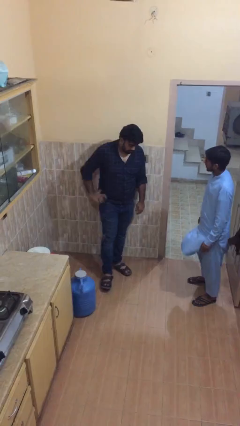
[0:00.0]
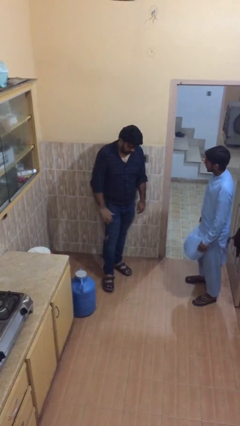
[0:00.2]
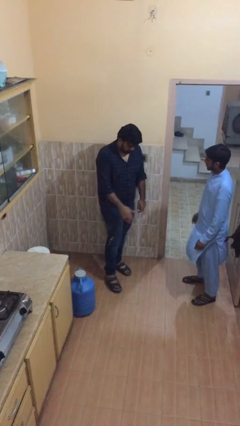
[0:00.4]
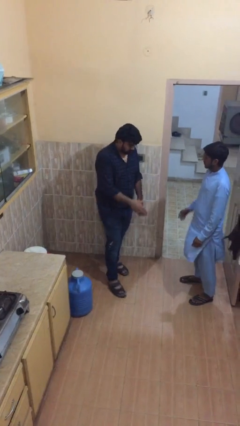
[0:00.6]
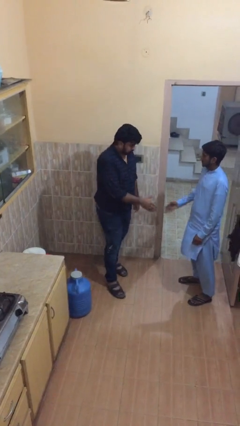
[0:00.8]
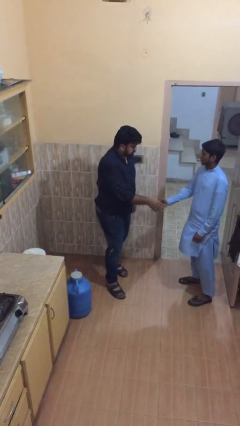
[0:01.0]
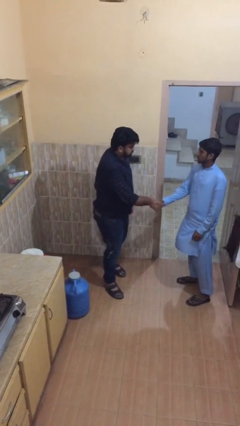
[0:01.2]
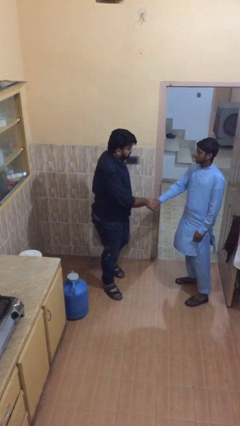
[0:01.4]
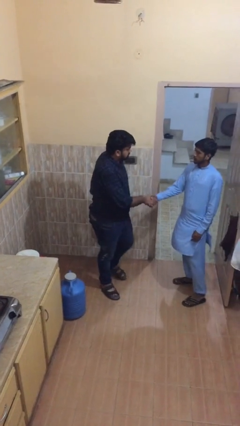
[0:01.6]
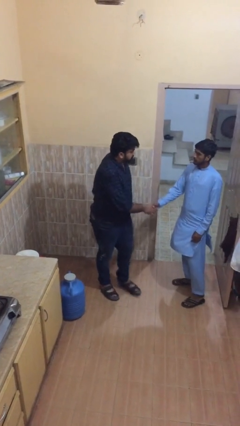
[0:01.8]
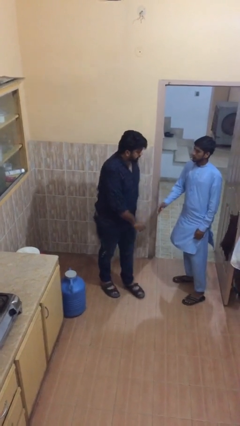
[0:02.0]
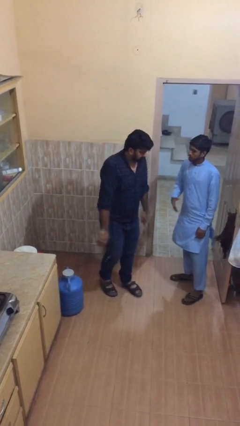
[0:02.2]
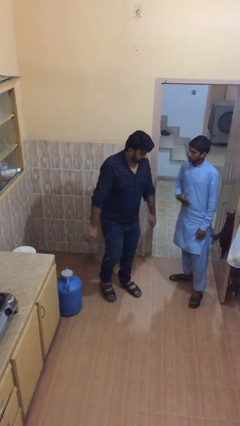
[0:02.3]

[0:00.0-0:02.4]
person shakes hand

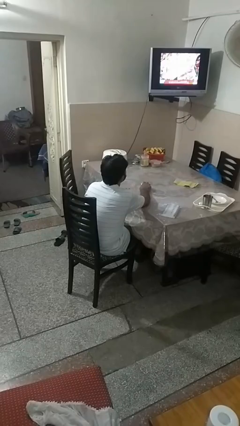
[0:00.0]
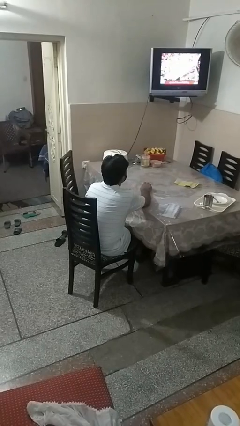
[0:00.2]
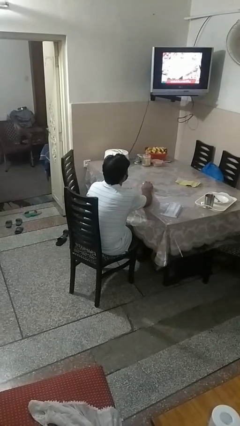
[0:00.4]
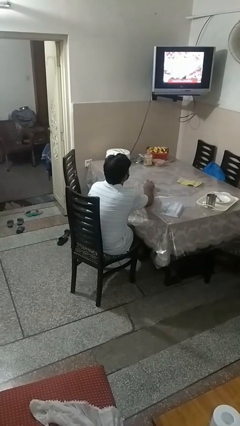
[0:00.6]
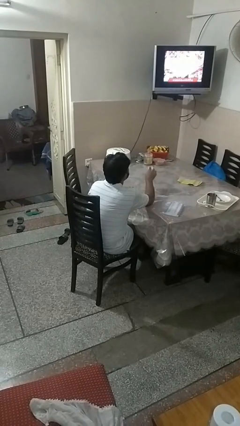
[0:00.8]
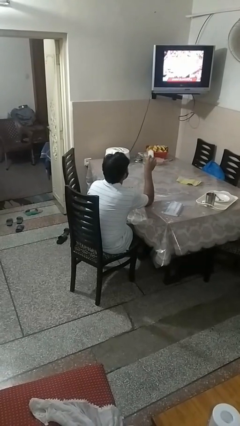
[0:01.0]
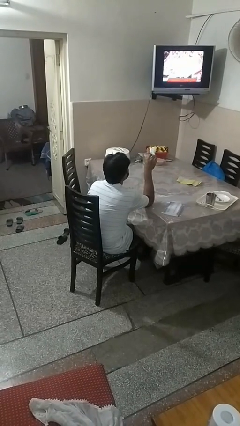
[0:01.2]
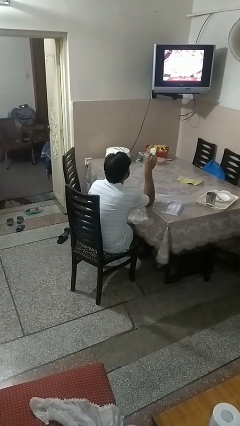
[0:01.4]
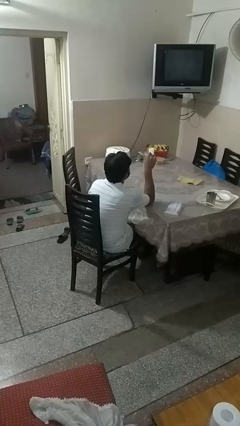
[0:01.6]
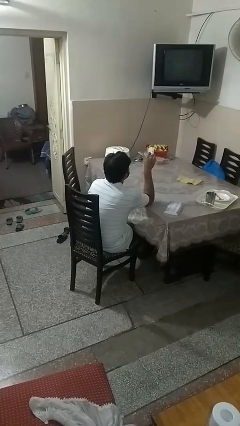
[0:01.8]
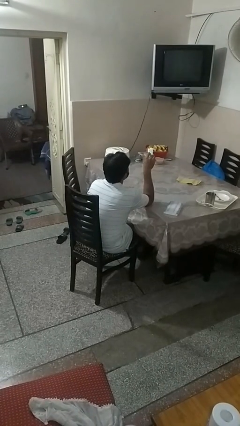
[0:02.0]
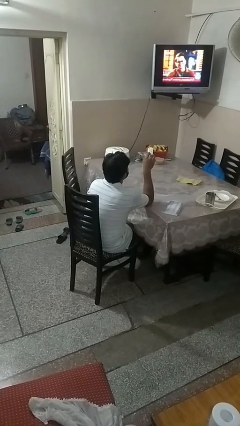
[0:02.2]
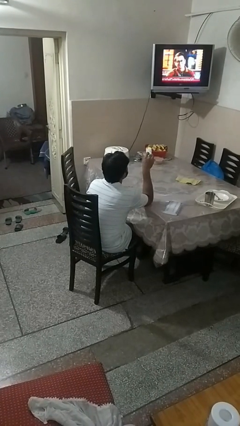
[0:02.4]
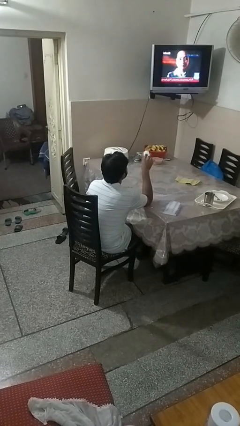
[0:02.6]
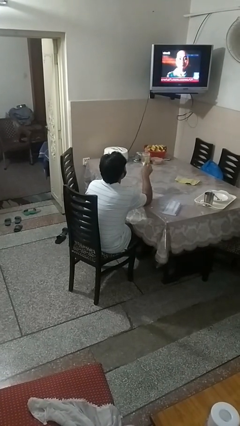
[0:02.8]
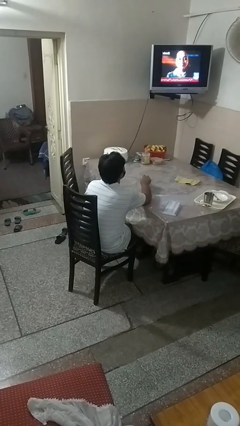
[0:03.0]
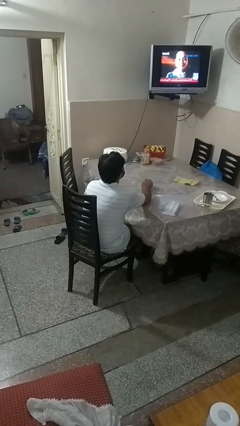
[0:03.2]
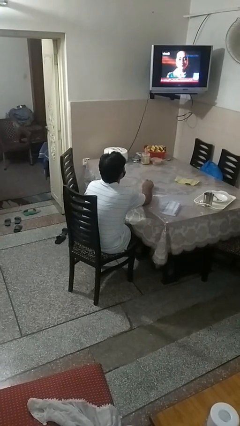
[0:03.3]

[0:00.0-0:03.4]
person uses television remote

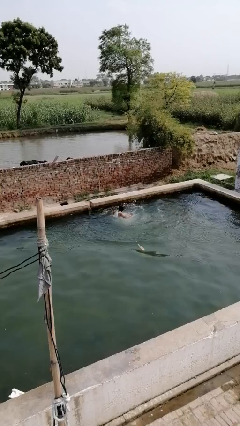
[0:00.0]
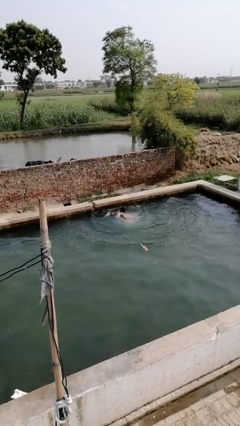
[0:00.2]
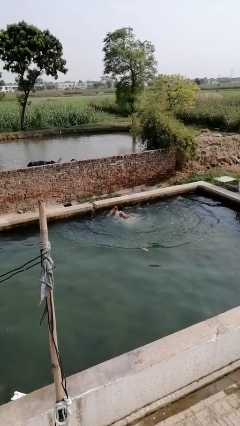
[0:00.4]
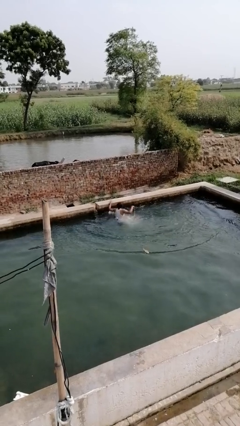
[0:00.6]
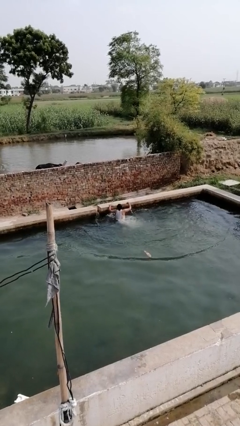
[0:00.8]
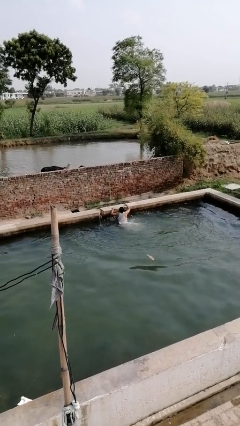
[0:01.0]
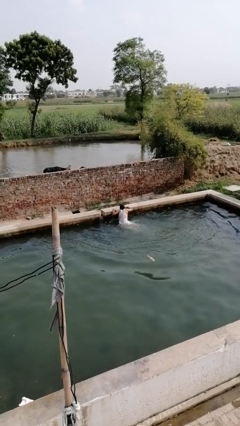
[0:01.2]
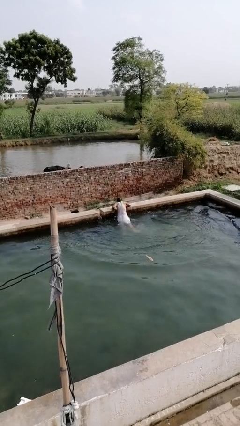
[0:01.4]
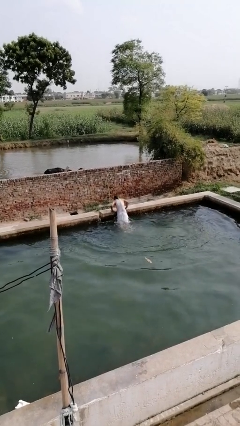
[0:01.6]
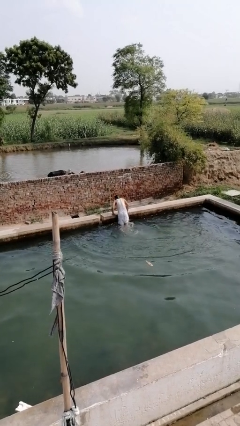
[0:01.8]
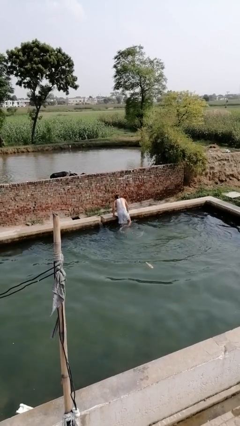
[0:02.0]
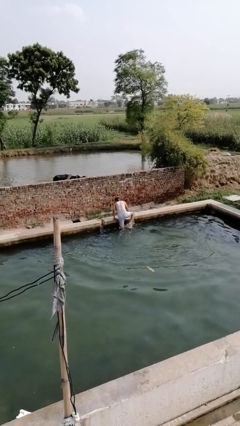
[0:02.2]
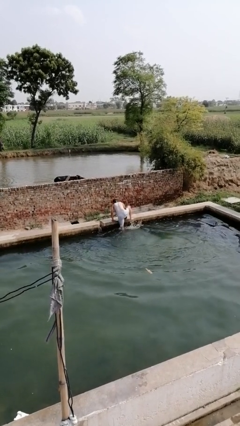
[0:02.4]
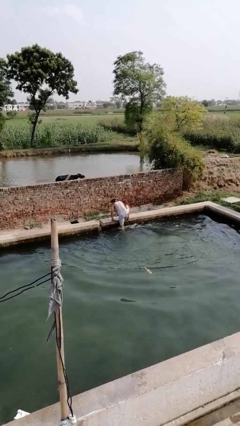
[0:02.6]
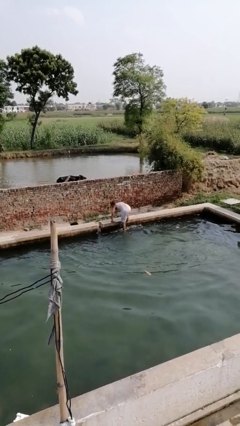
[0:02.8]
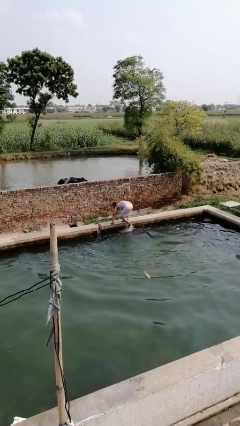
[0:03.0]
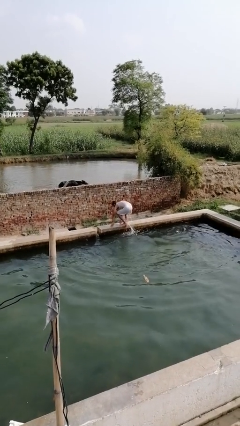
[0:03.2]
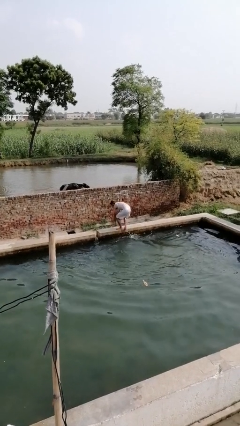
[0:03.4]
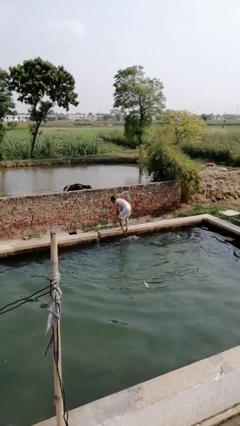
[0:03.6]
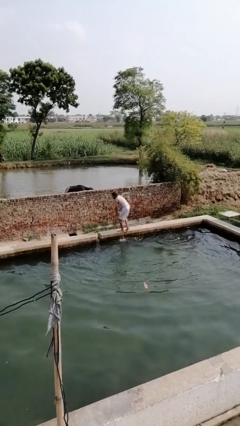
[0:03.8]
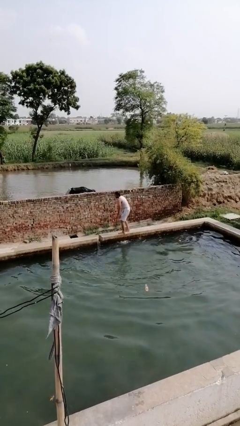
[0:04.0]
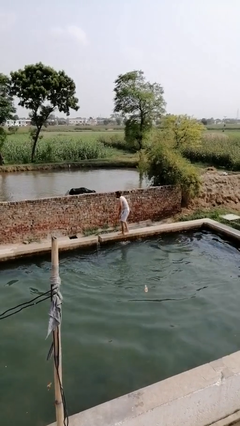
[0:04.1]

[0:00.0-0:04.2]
person exits pool

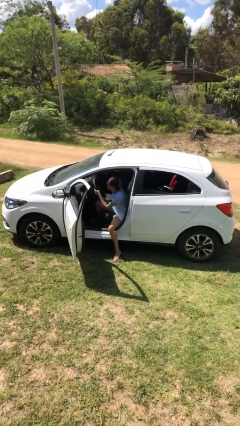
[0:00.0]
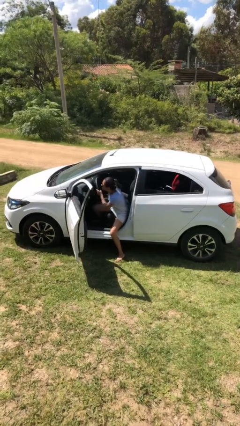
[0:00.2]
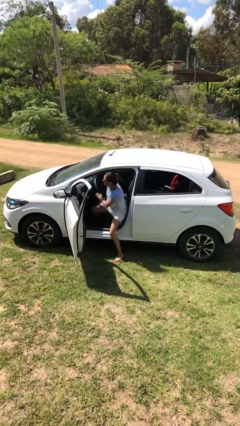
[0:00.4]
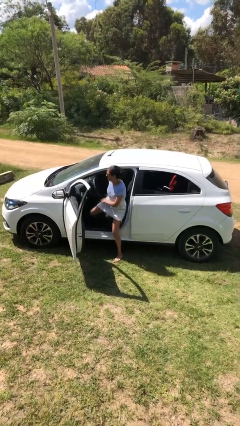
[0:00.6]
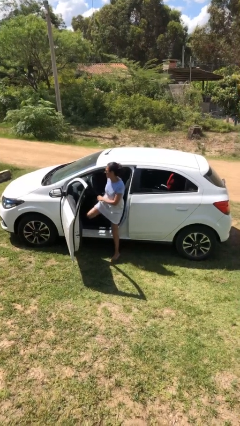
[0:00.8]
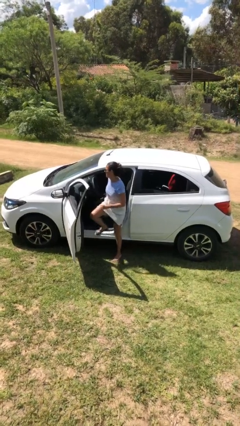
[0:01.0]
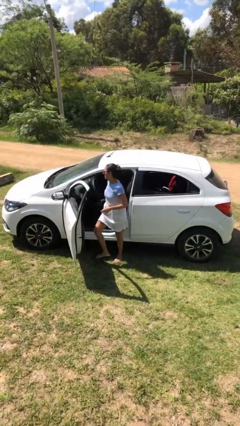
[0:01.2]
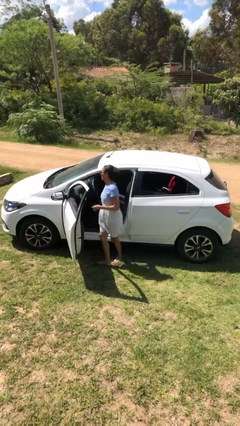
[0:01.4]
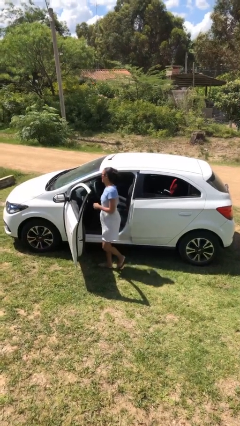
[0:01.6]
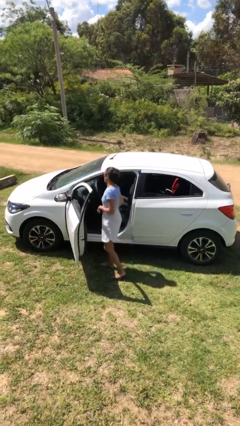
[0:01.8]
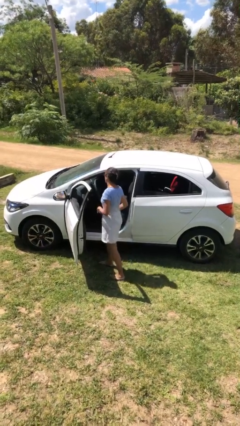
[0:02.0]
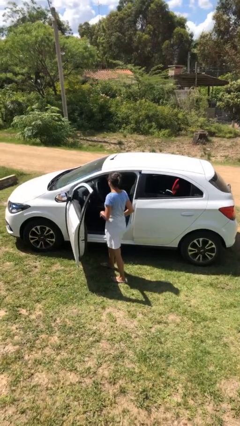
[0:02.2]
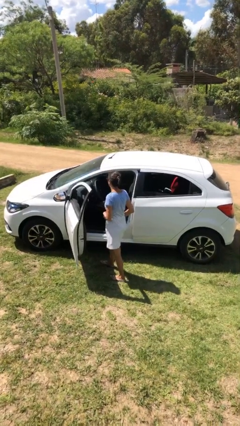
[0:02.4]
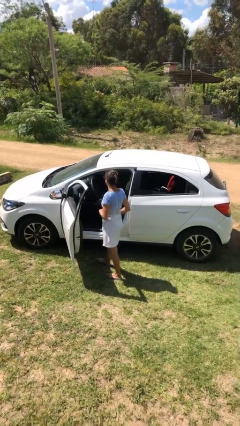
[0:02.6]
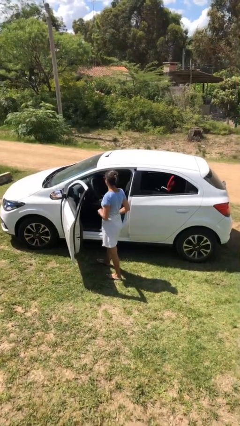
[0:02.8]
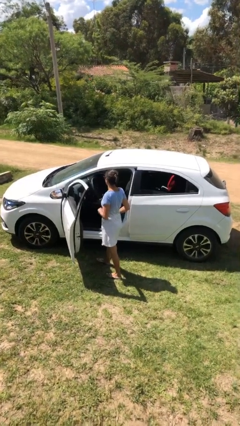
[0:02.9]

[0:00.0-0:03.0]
person exits car

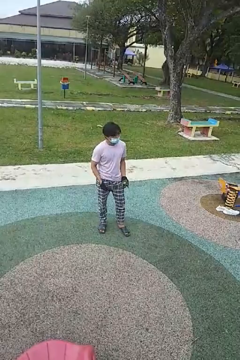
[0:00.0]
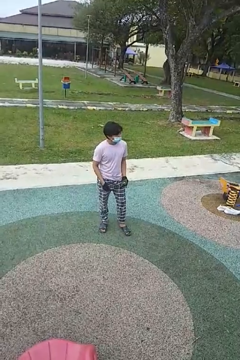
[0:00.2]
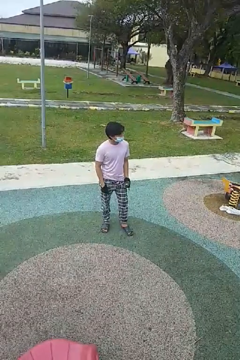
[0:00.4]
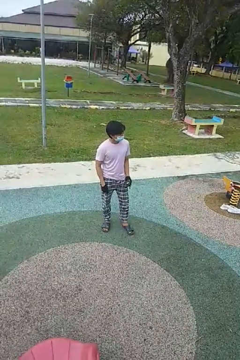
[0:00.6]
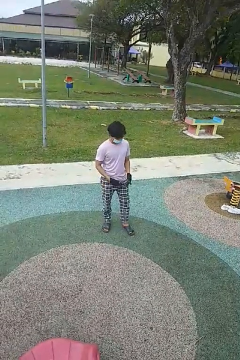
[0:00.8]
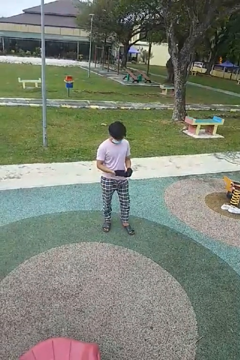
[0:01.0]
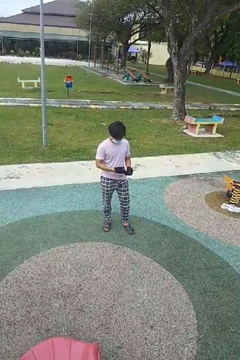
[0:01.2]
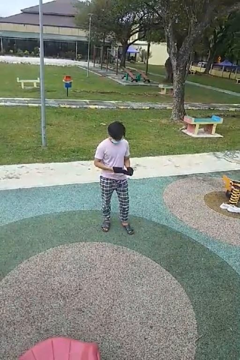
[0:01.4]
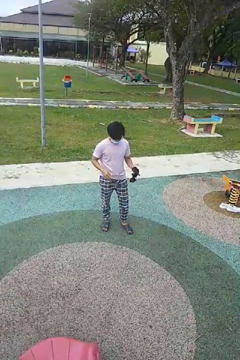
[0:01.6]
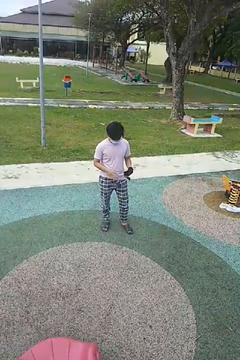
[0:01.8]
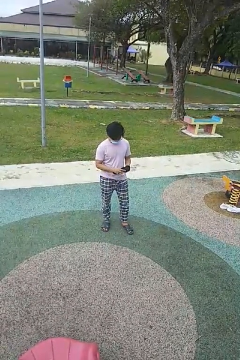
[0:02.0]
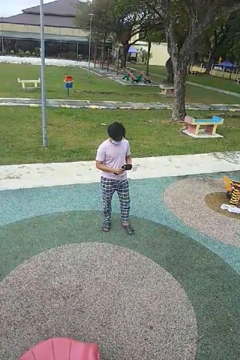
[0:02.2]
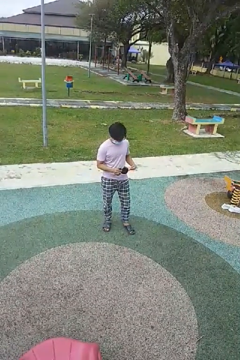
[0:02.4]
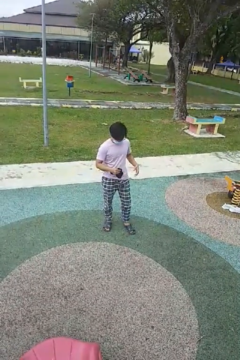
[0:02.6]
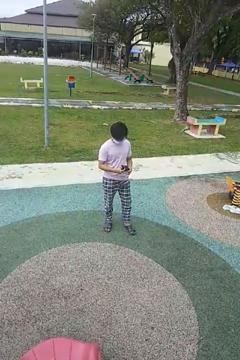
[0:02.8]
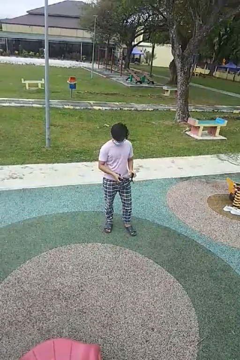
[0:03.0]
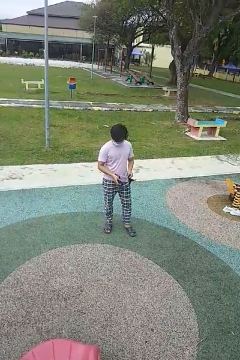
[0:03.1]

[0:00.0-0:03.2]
person takes off gloves

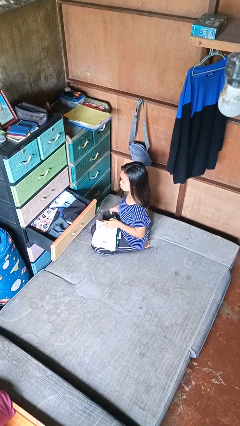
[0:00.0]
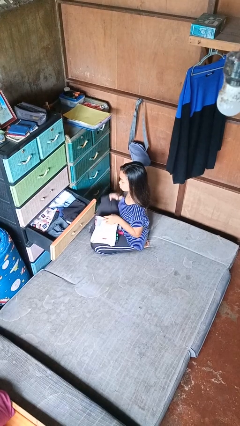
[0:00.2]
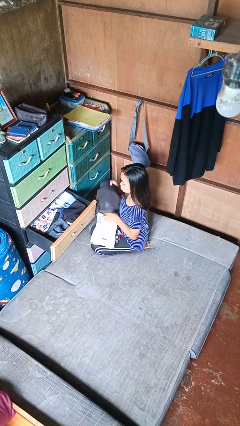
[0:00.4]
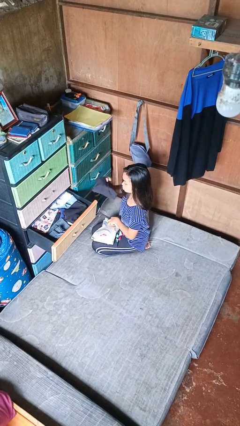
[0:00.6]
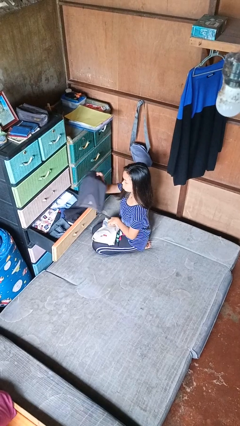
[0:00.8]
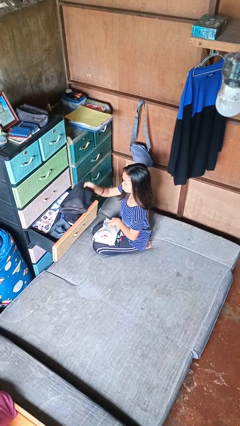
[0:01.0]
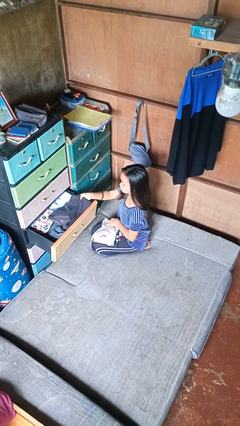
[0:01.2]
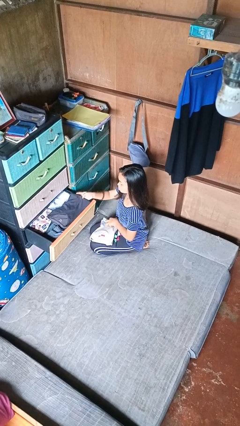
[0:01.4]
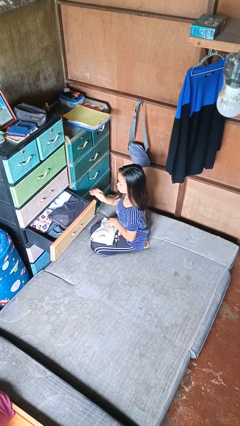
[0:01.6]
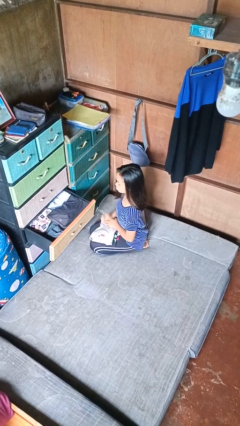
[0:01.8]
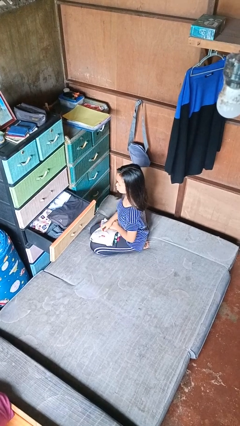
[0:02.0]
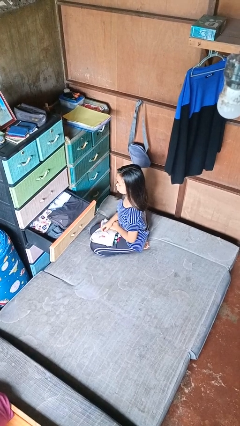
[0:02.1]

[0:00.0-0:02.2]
person puts clothes into dresser
